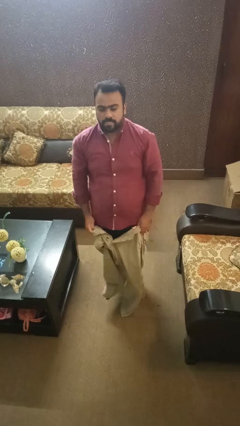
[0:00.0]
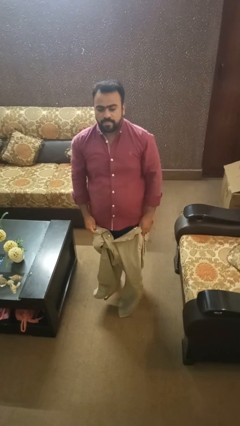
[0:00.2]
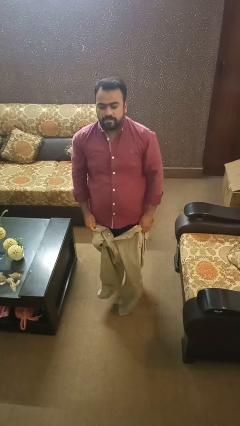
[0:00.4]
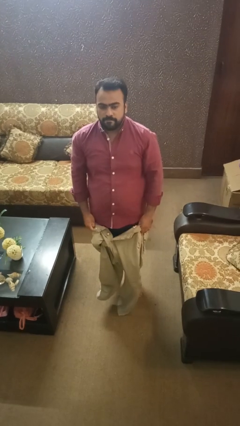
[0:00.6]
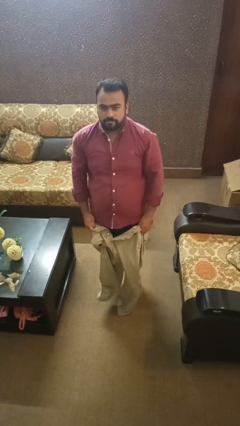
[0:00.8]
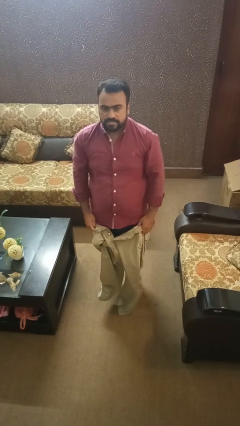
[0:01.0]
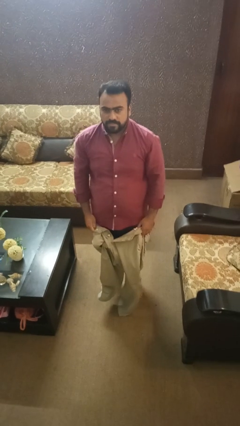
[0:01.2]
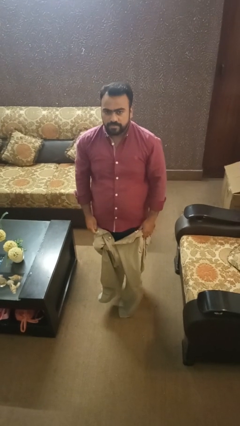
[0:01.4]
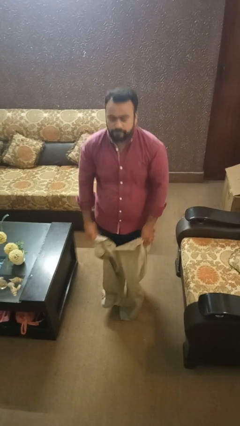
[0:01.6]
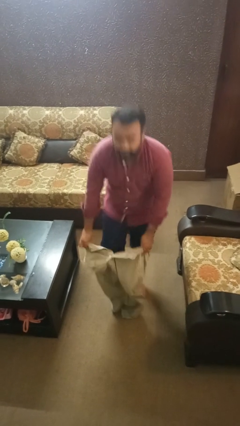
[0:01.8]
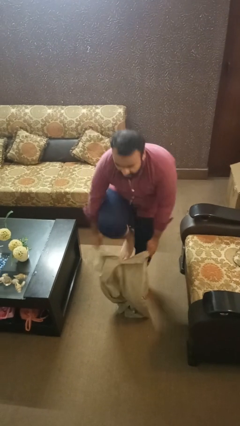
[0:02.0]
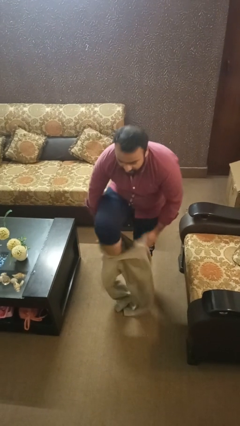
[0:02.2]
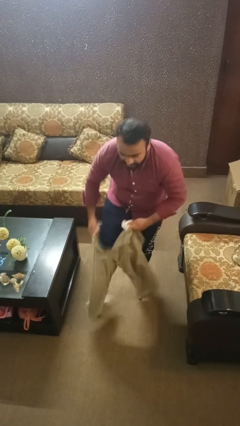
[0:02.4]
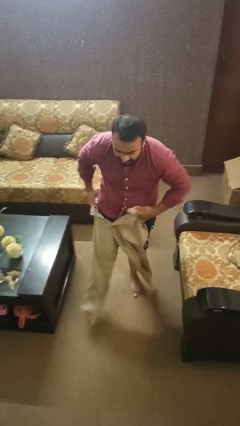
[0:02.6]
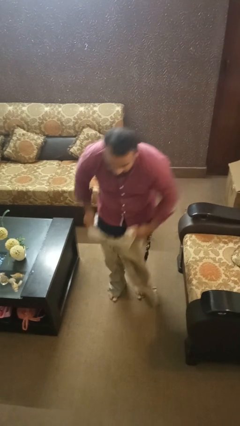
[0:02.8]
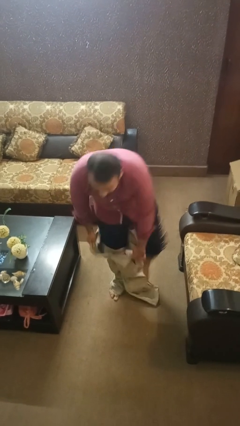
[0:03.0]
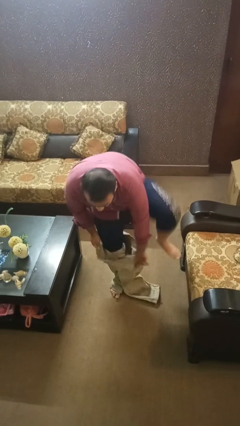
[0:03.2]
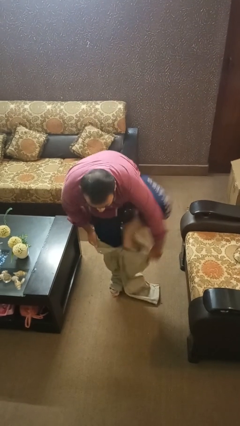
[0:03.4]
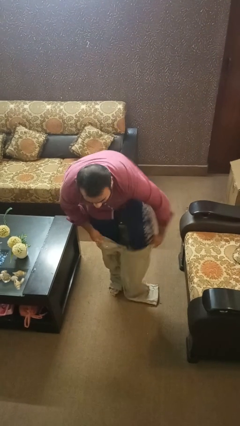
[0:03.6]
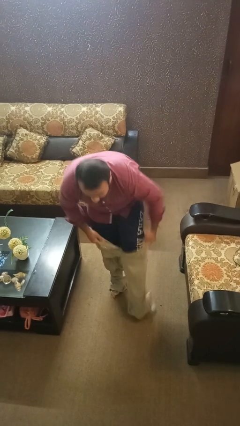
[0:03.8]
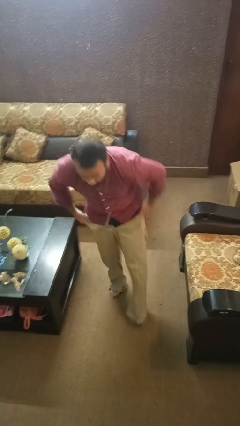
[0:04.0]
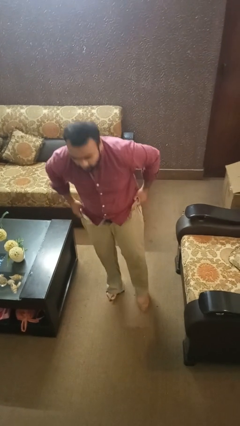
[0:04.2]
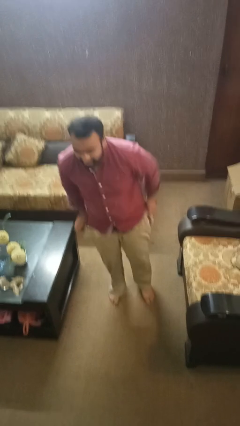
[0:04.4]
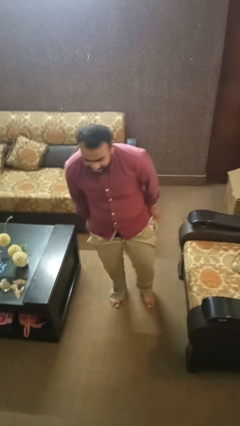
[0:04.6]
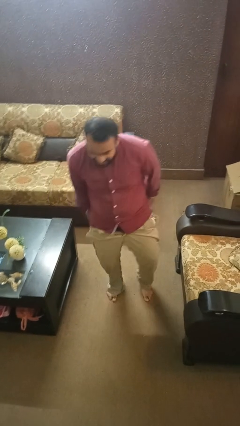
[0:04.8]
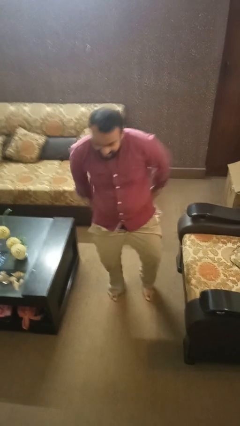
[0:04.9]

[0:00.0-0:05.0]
person puts on pants

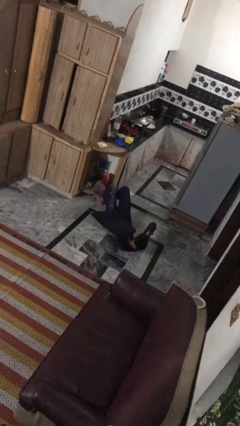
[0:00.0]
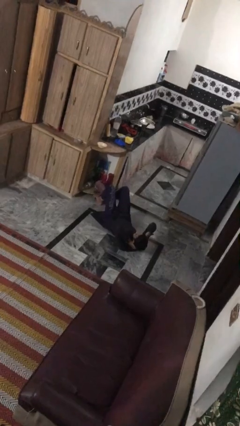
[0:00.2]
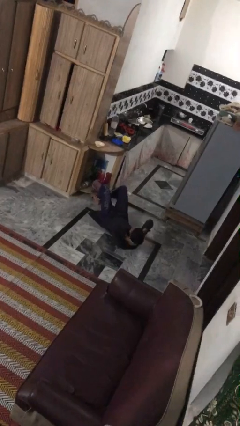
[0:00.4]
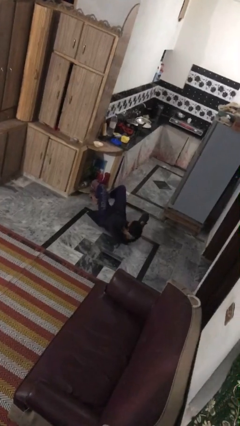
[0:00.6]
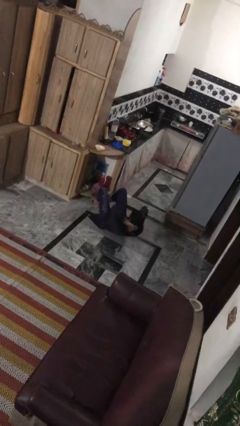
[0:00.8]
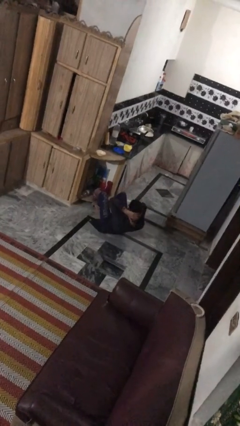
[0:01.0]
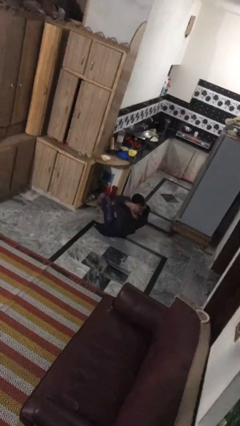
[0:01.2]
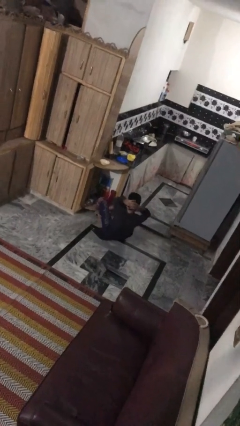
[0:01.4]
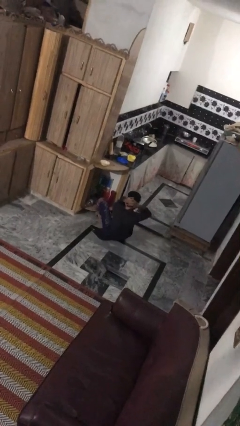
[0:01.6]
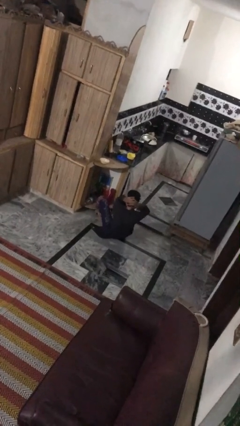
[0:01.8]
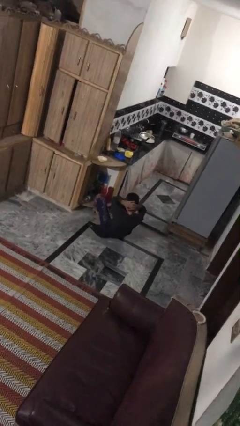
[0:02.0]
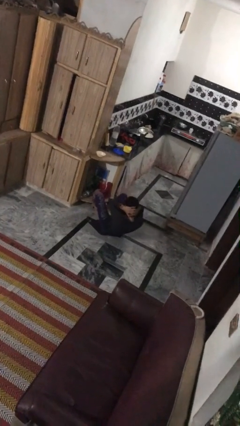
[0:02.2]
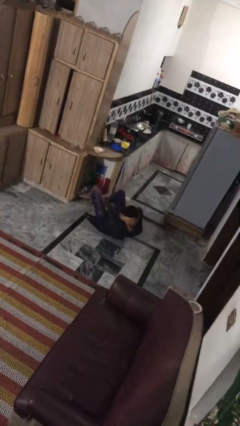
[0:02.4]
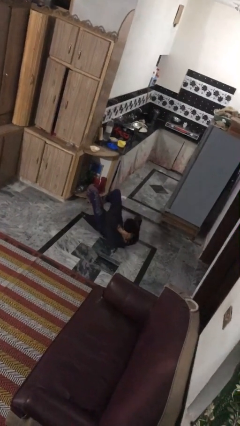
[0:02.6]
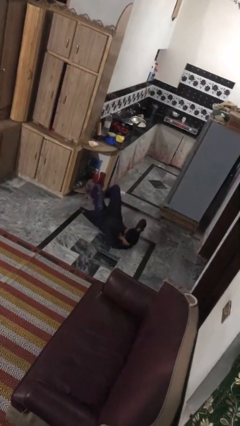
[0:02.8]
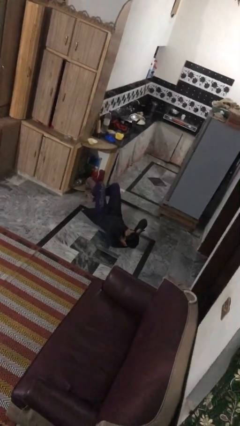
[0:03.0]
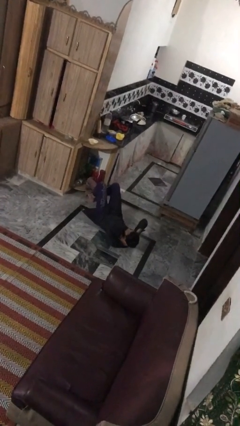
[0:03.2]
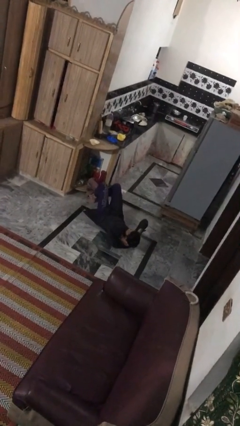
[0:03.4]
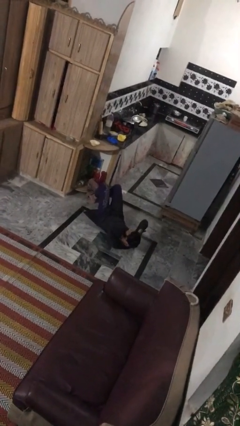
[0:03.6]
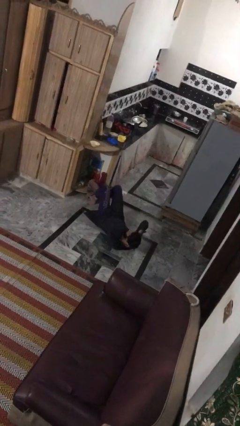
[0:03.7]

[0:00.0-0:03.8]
person exercises with situp

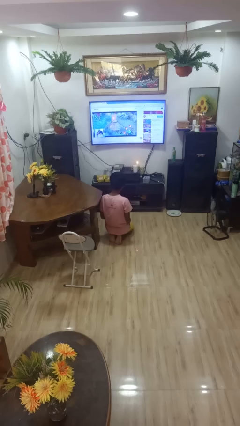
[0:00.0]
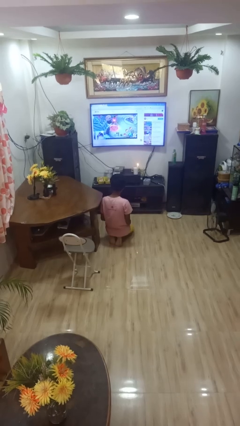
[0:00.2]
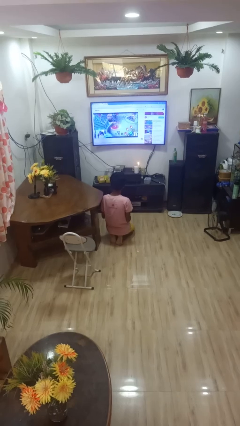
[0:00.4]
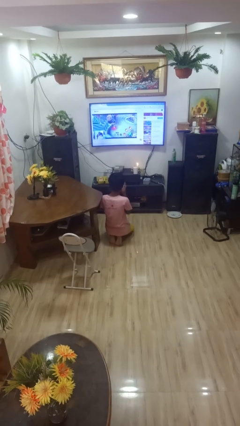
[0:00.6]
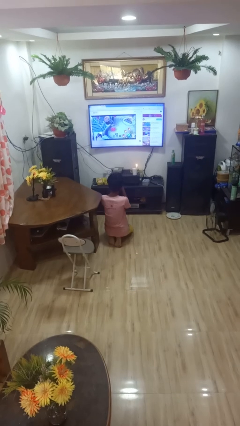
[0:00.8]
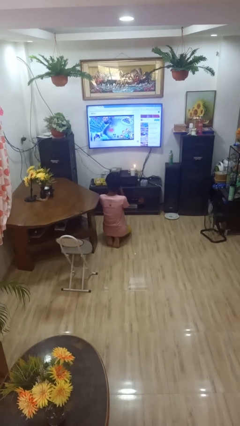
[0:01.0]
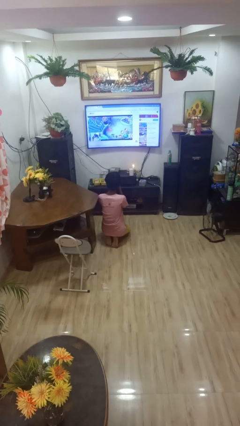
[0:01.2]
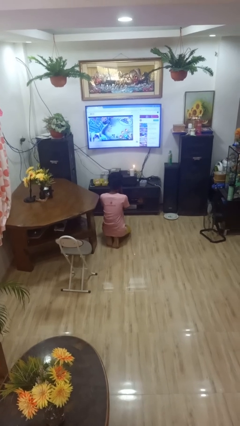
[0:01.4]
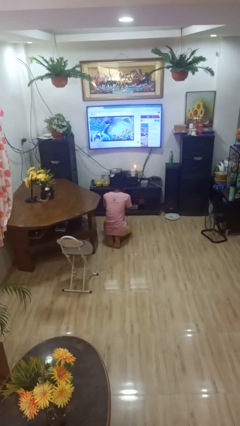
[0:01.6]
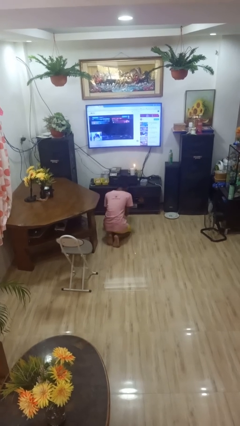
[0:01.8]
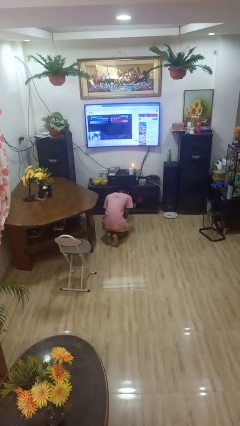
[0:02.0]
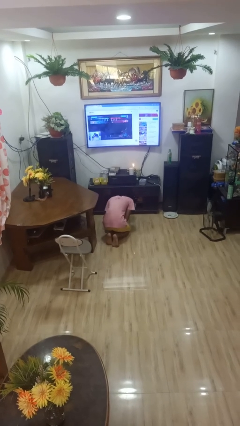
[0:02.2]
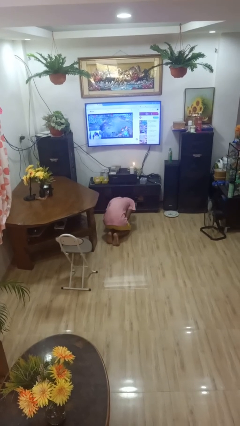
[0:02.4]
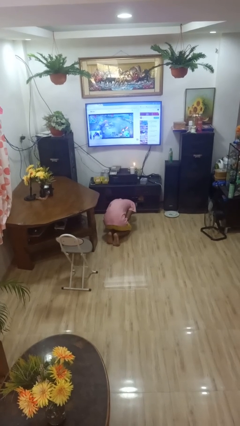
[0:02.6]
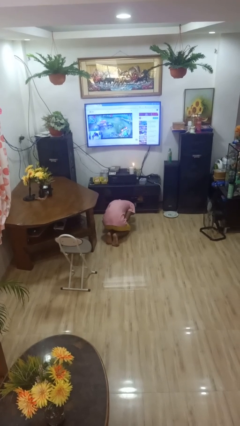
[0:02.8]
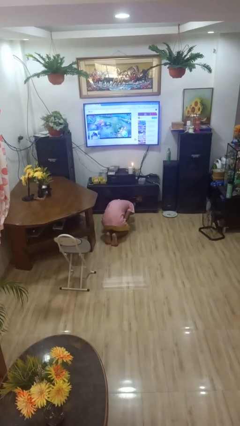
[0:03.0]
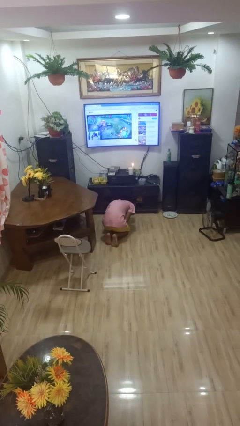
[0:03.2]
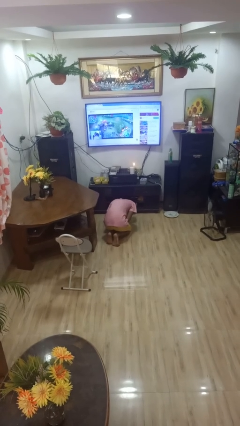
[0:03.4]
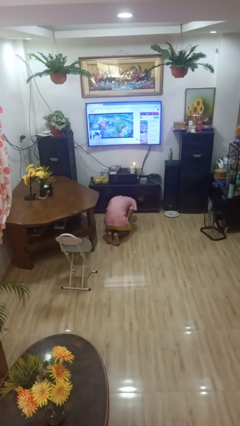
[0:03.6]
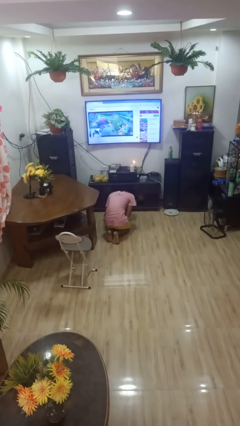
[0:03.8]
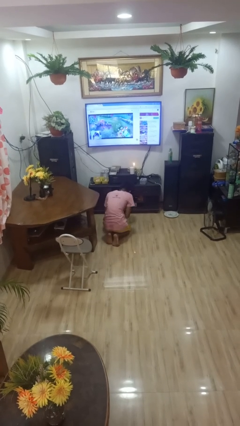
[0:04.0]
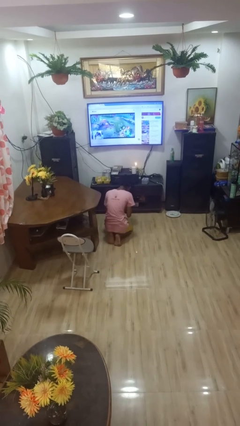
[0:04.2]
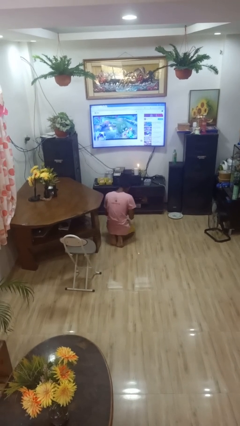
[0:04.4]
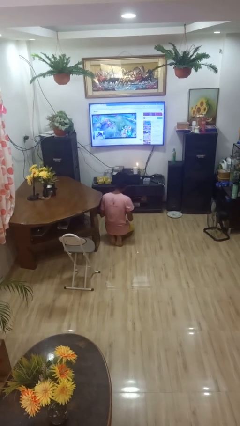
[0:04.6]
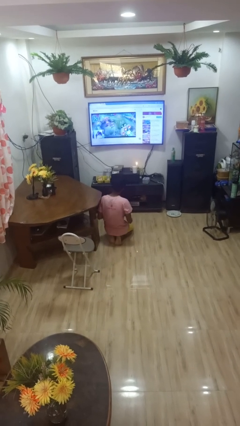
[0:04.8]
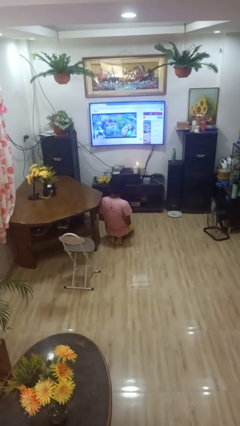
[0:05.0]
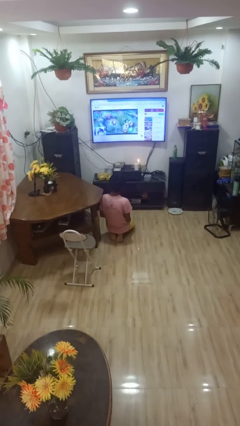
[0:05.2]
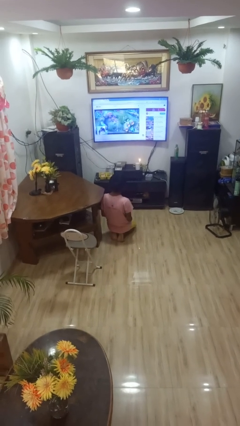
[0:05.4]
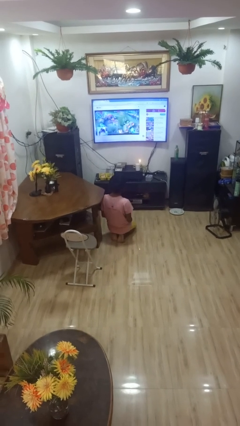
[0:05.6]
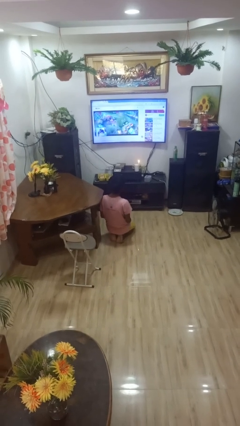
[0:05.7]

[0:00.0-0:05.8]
person prays

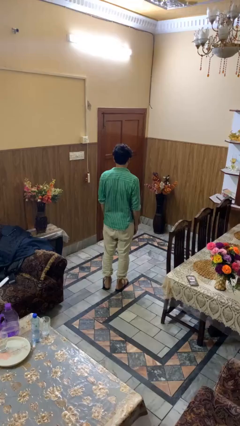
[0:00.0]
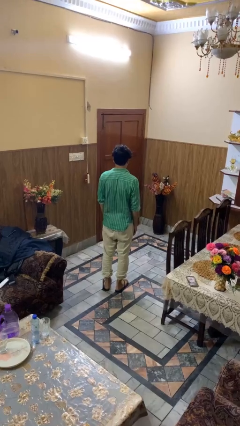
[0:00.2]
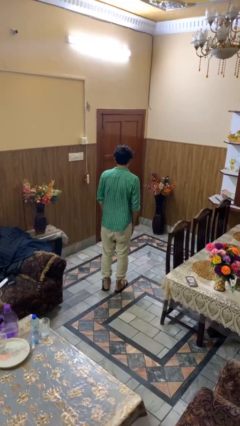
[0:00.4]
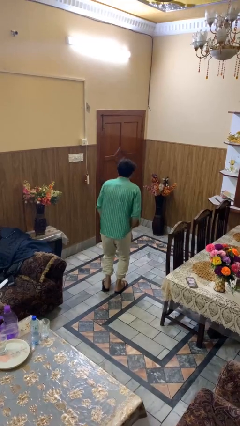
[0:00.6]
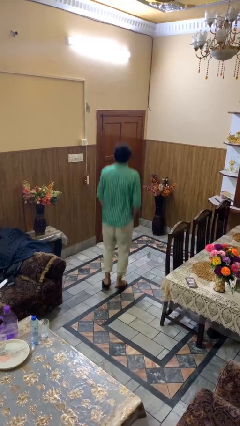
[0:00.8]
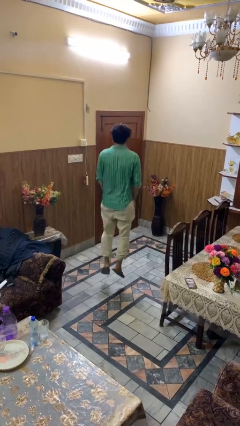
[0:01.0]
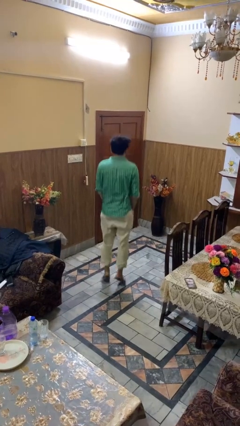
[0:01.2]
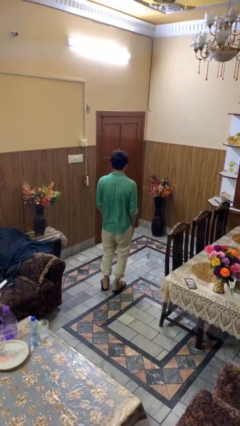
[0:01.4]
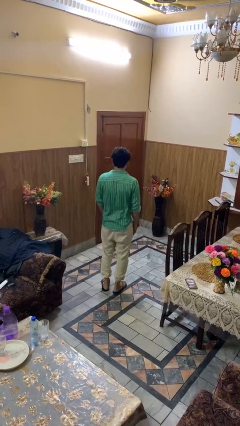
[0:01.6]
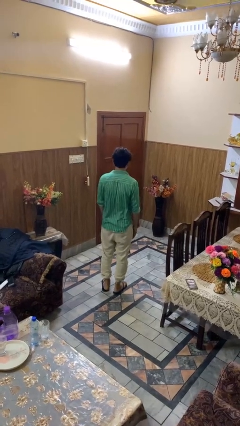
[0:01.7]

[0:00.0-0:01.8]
person jumps

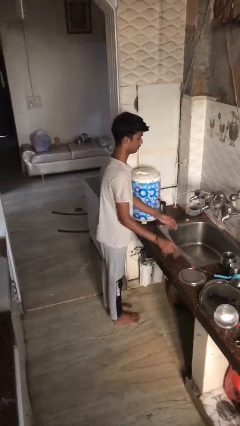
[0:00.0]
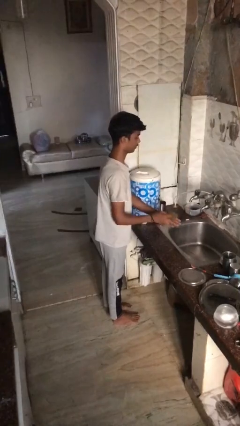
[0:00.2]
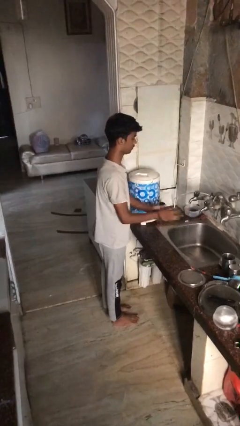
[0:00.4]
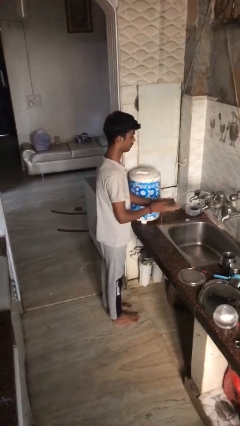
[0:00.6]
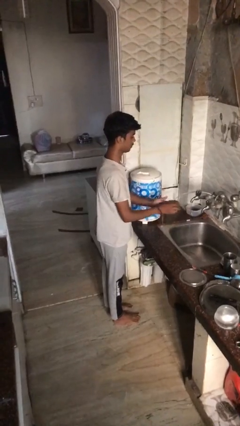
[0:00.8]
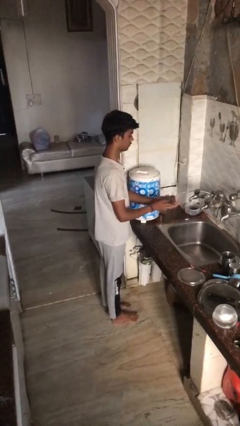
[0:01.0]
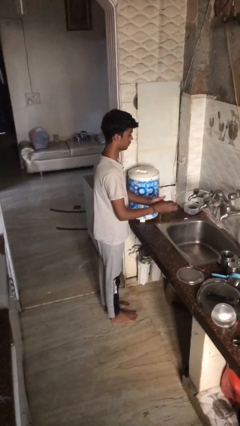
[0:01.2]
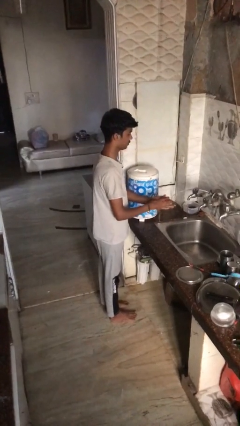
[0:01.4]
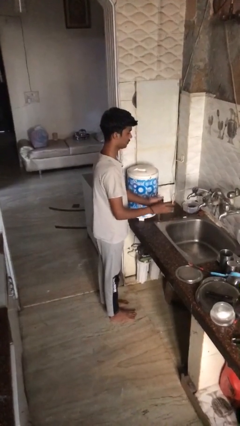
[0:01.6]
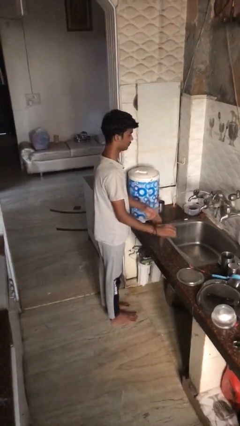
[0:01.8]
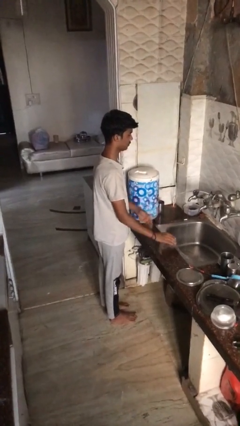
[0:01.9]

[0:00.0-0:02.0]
person dries hands with towel
